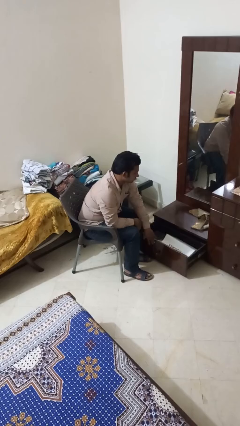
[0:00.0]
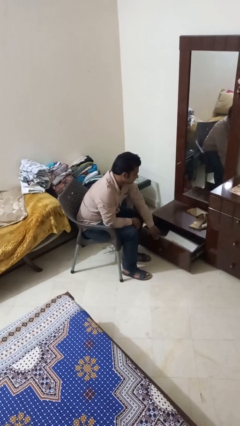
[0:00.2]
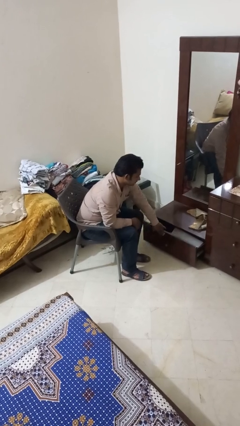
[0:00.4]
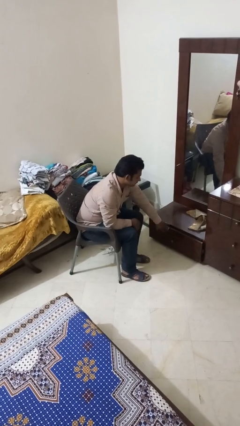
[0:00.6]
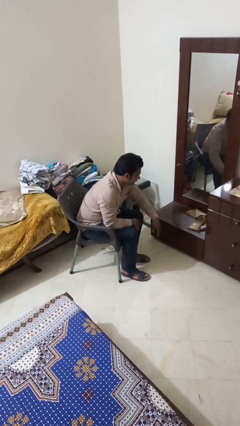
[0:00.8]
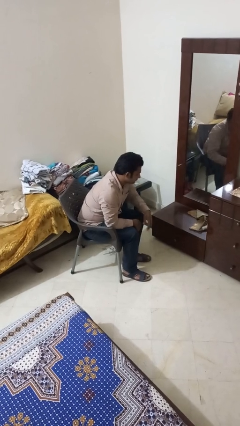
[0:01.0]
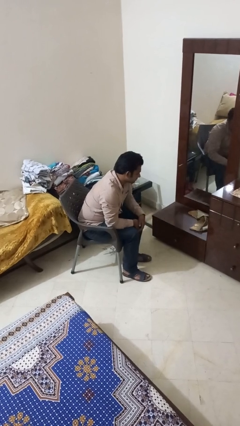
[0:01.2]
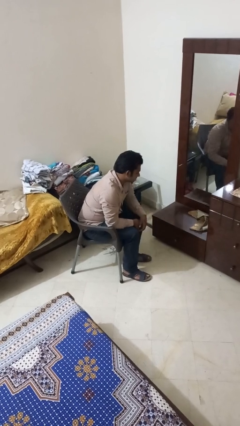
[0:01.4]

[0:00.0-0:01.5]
person closes closet door

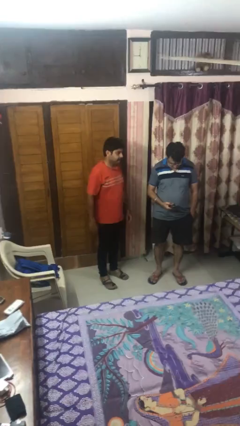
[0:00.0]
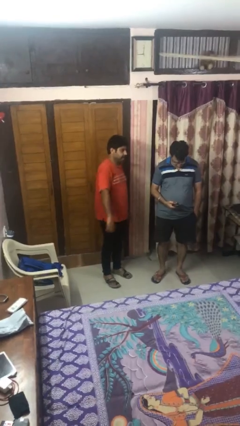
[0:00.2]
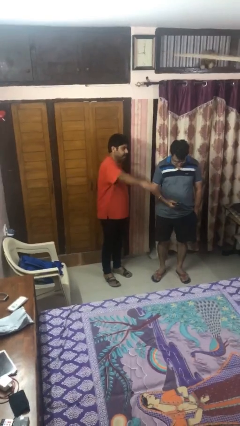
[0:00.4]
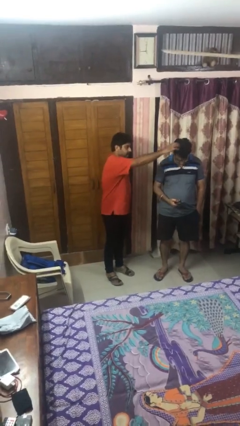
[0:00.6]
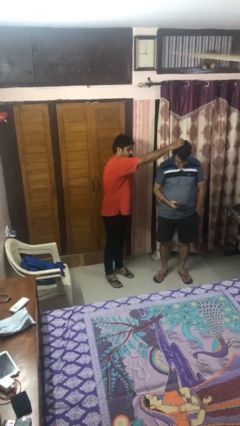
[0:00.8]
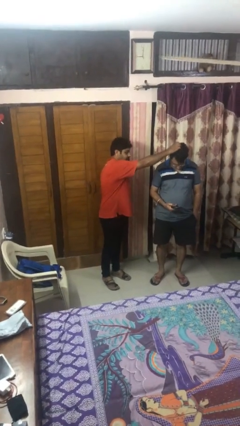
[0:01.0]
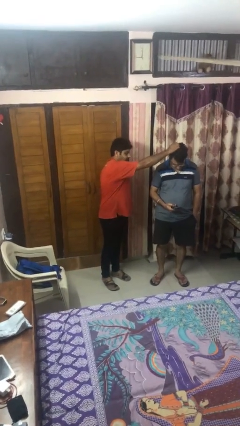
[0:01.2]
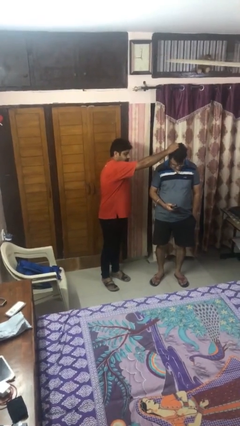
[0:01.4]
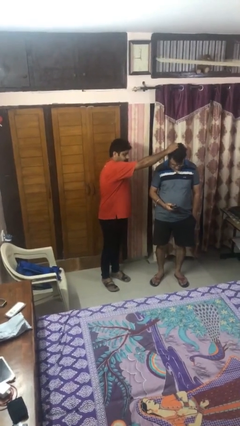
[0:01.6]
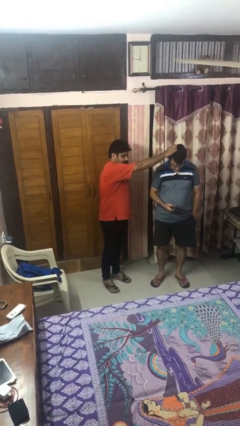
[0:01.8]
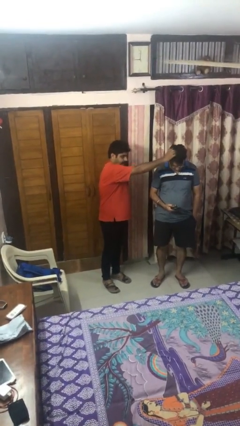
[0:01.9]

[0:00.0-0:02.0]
person grabs person by hair

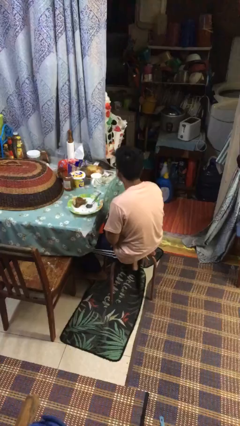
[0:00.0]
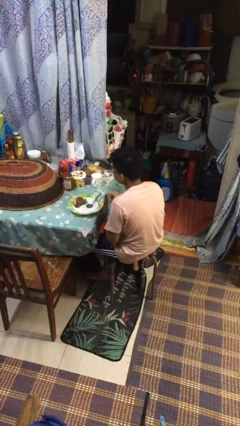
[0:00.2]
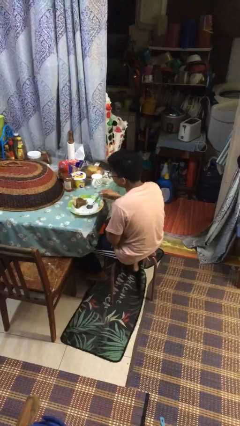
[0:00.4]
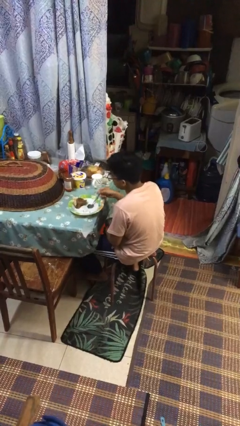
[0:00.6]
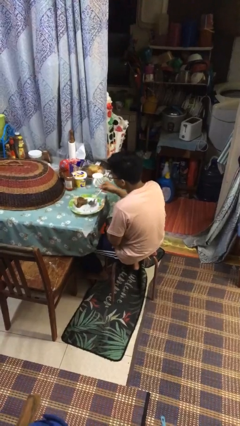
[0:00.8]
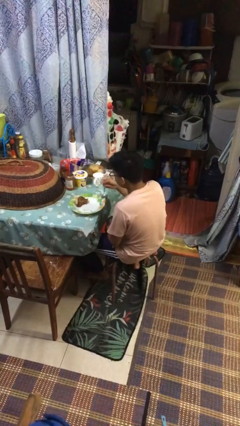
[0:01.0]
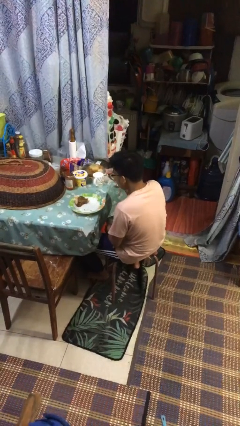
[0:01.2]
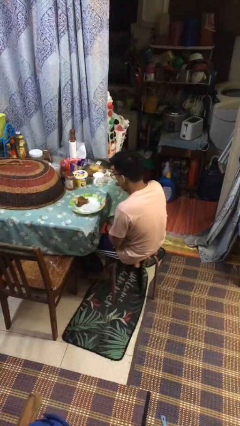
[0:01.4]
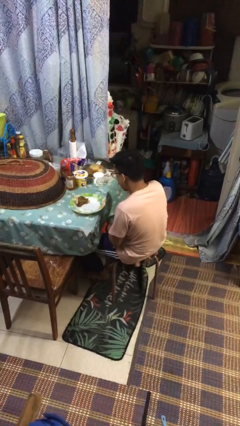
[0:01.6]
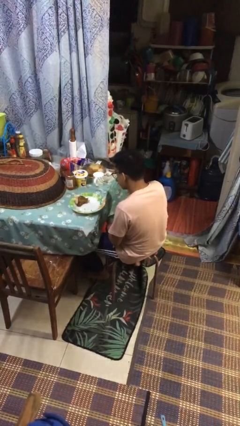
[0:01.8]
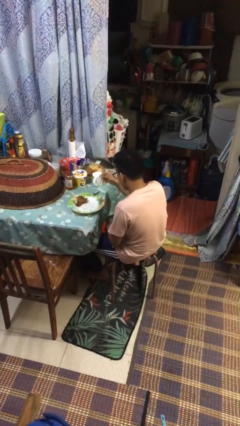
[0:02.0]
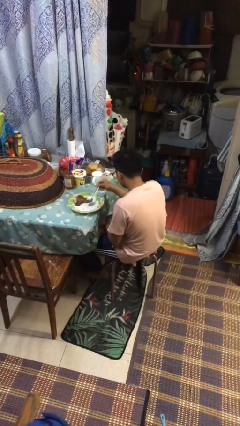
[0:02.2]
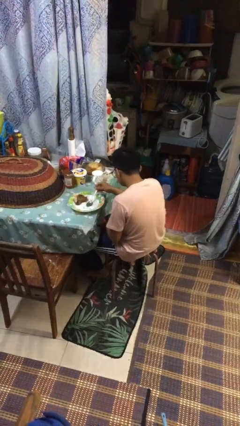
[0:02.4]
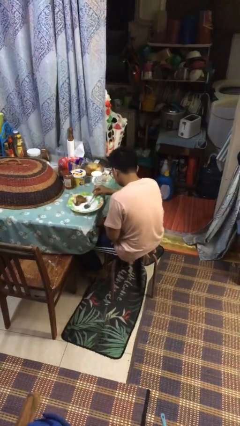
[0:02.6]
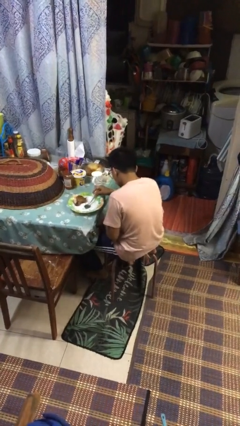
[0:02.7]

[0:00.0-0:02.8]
person eats with utensil

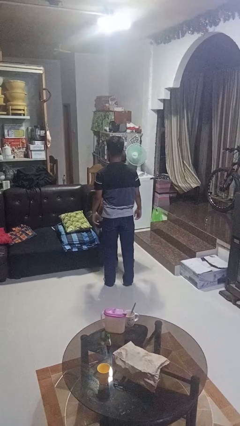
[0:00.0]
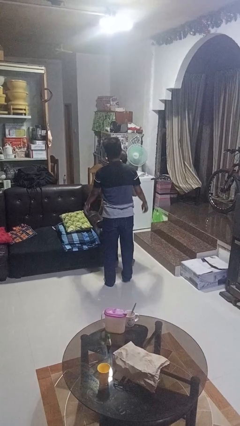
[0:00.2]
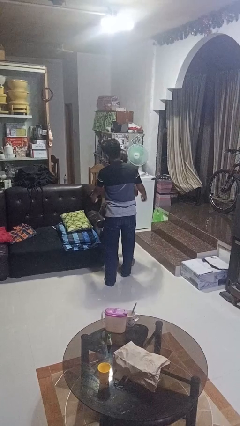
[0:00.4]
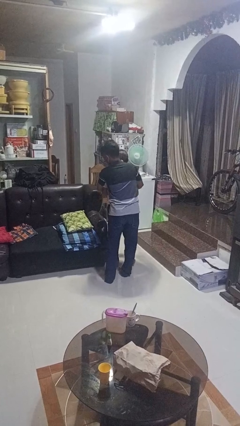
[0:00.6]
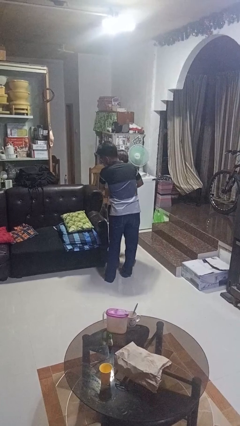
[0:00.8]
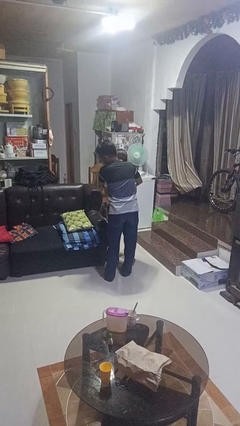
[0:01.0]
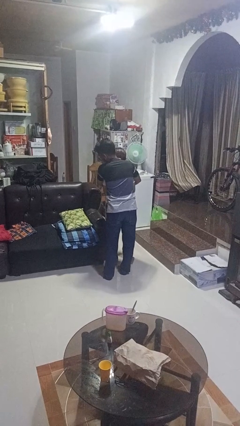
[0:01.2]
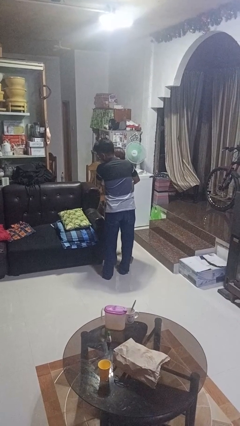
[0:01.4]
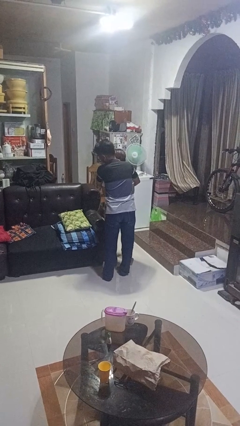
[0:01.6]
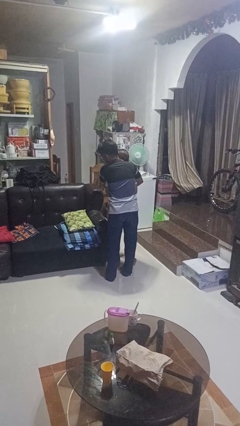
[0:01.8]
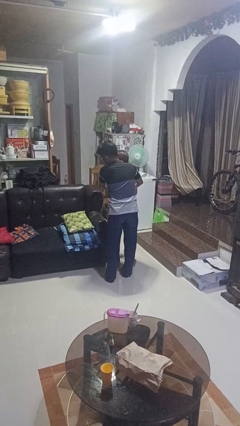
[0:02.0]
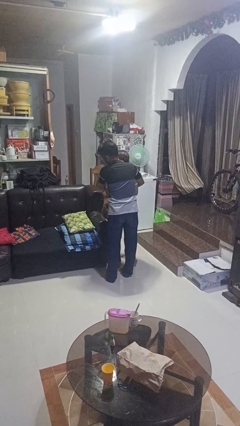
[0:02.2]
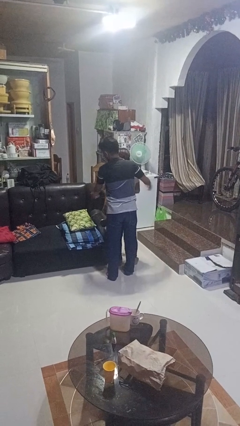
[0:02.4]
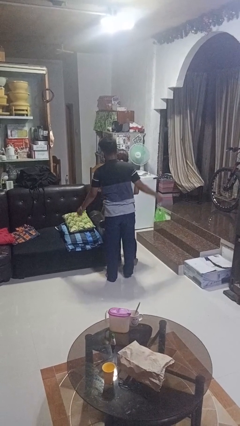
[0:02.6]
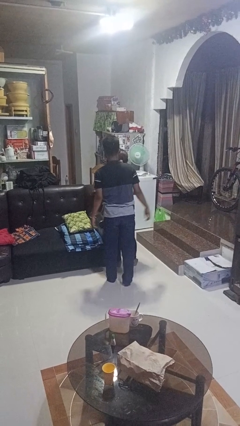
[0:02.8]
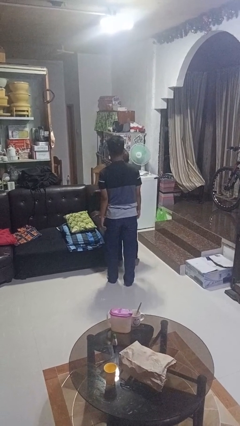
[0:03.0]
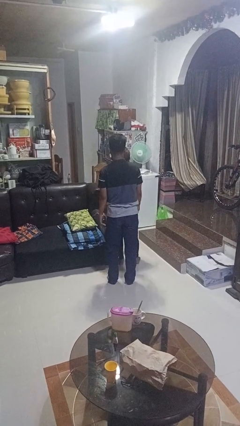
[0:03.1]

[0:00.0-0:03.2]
person hugs person from behind

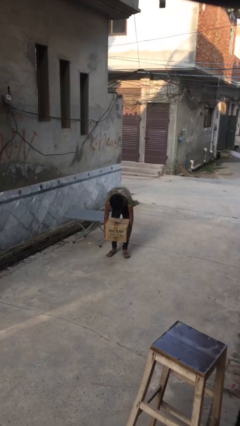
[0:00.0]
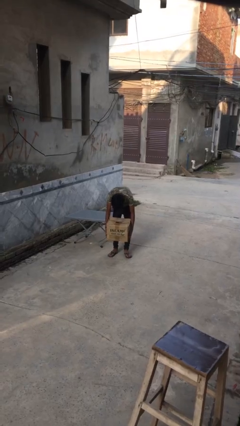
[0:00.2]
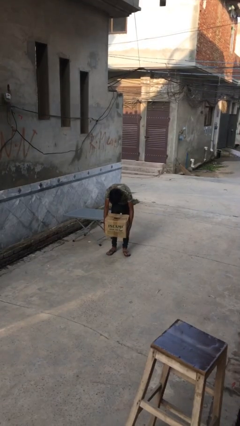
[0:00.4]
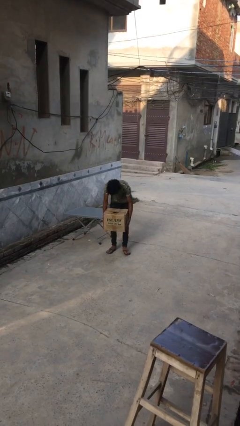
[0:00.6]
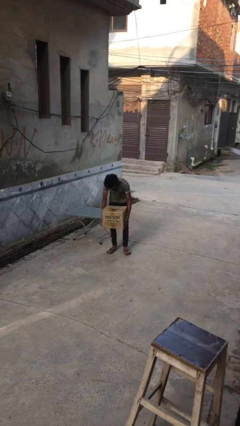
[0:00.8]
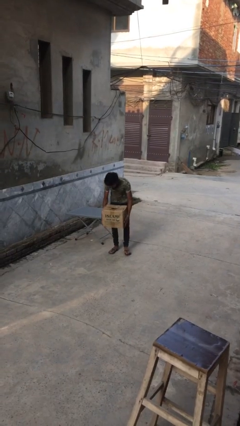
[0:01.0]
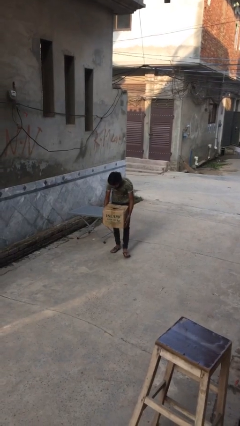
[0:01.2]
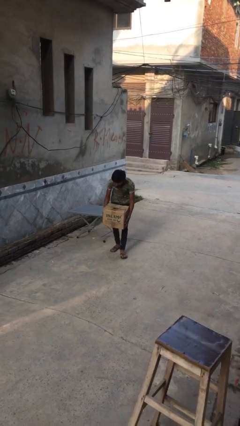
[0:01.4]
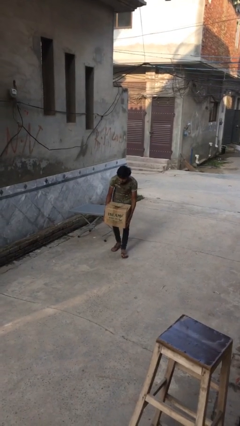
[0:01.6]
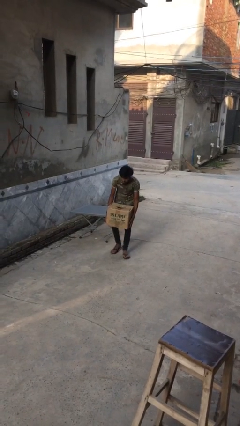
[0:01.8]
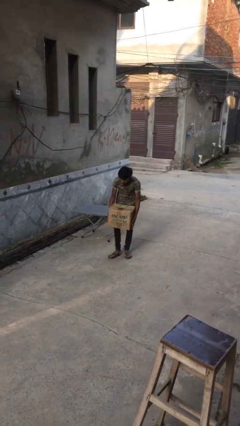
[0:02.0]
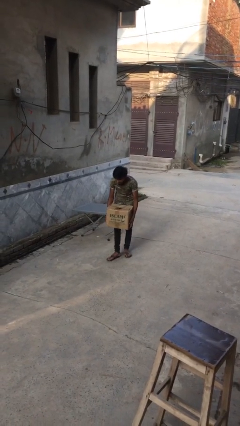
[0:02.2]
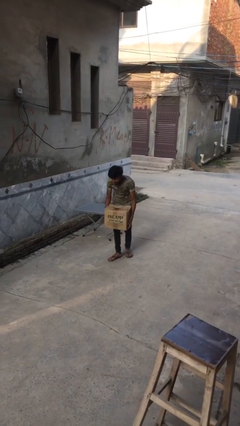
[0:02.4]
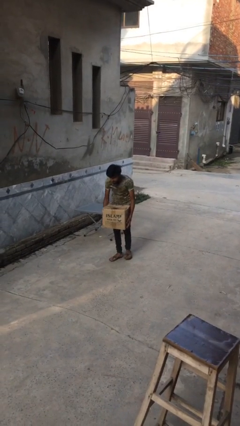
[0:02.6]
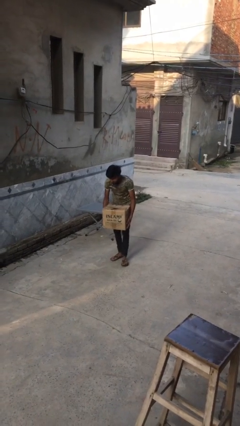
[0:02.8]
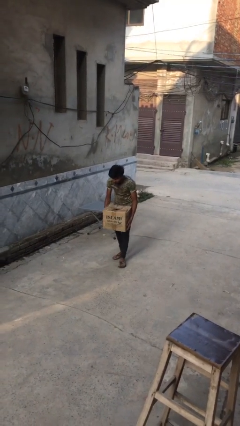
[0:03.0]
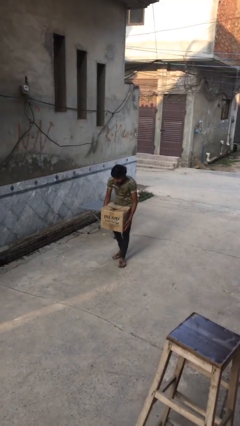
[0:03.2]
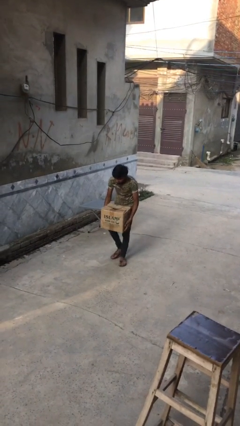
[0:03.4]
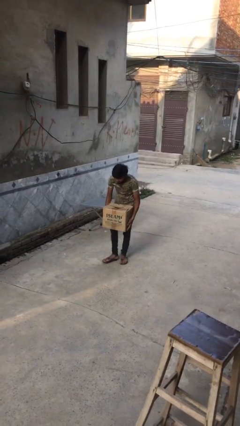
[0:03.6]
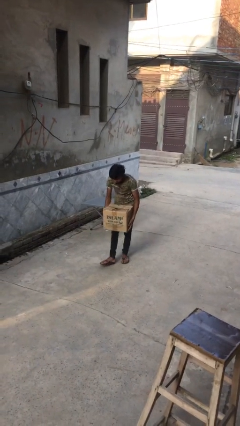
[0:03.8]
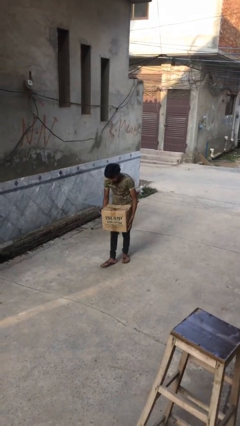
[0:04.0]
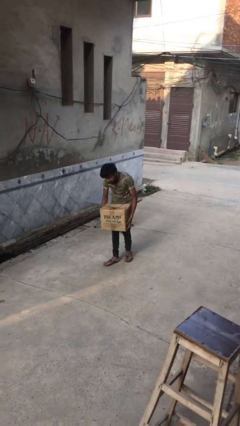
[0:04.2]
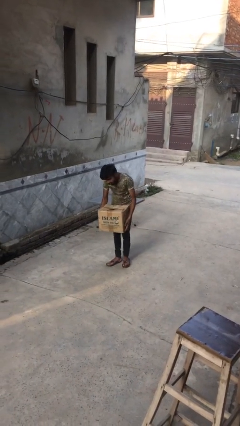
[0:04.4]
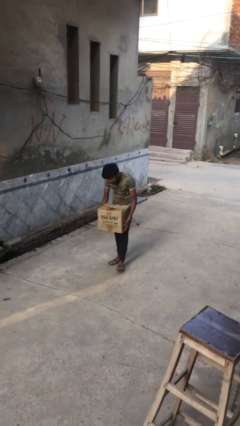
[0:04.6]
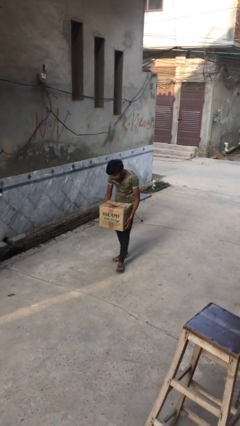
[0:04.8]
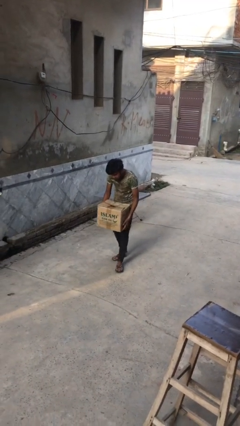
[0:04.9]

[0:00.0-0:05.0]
person carries heavy object

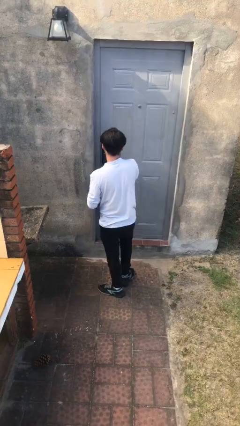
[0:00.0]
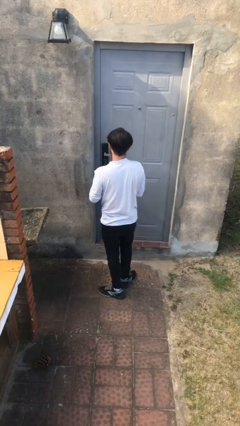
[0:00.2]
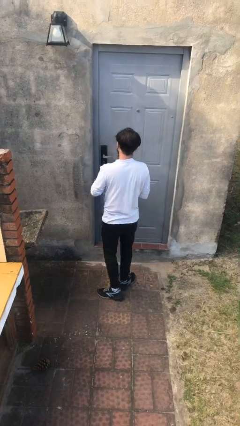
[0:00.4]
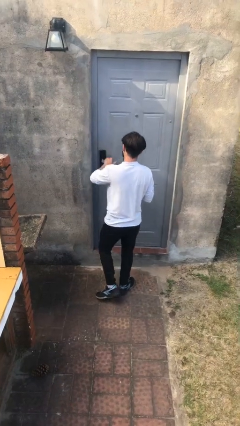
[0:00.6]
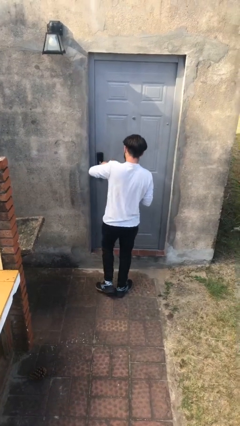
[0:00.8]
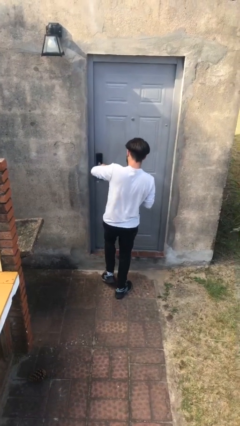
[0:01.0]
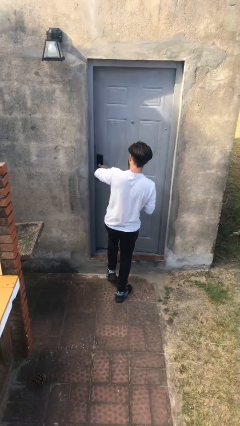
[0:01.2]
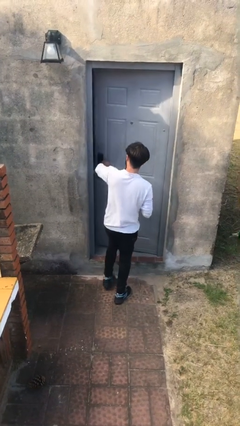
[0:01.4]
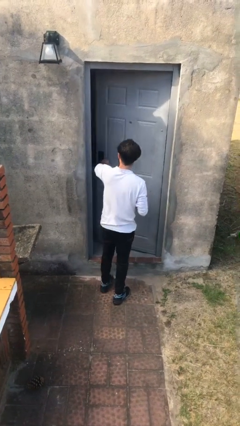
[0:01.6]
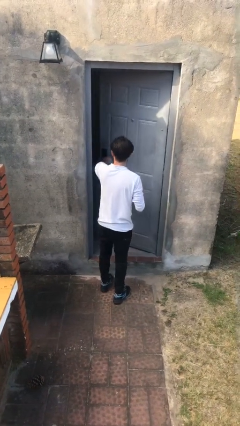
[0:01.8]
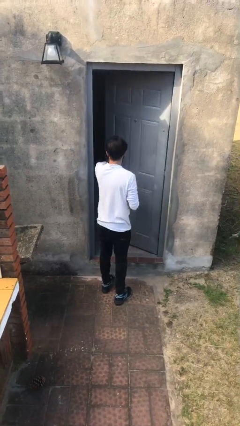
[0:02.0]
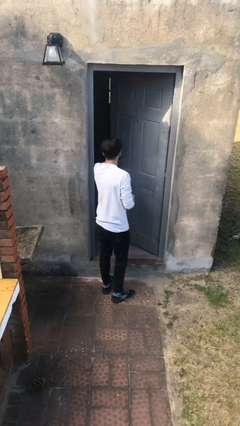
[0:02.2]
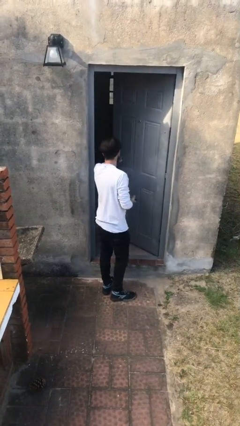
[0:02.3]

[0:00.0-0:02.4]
person opens facility door

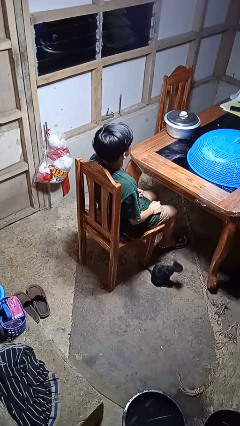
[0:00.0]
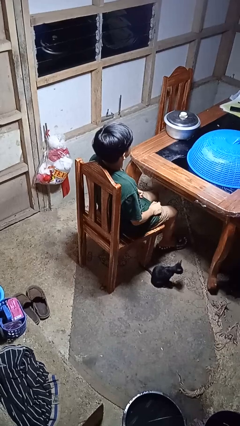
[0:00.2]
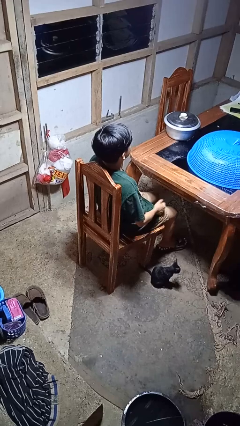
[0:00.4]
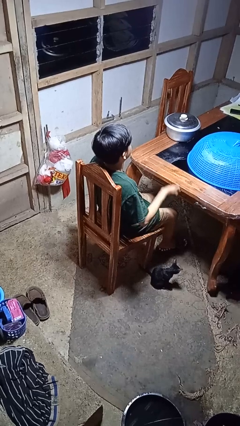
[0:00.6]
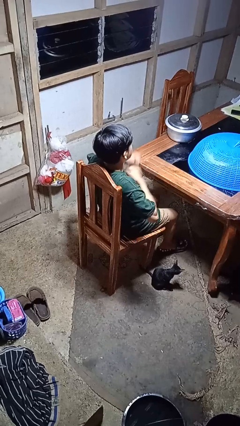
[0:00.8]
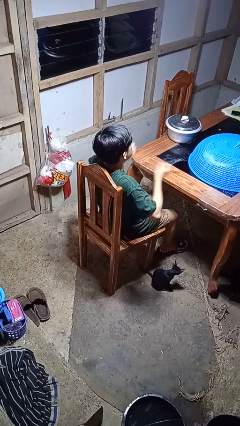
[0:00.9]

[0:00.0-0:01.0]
person drums on chest
